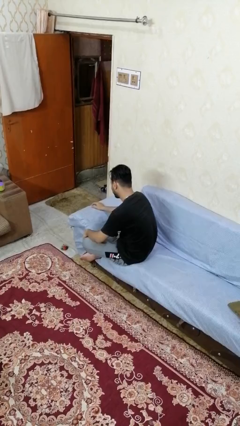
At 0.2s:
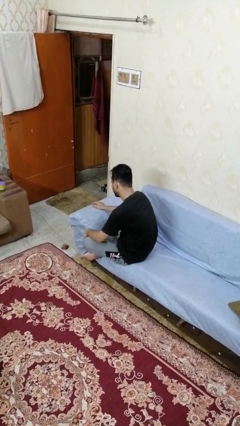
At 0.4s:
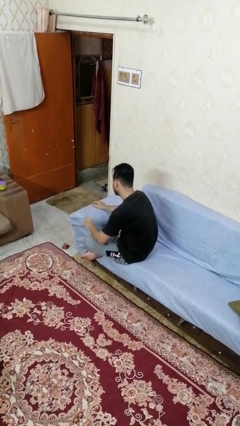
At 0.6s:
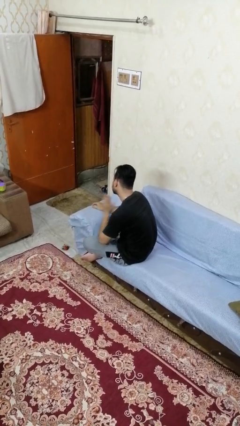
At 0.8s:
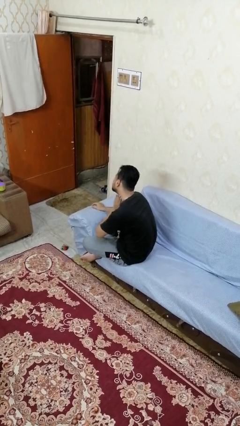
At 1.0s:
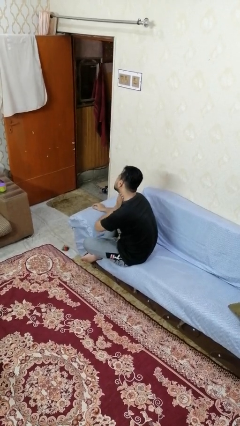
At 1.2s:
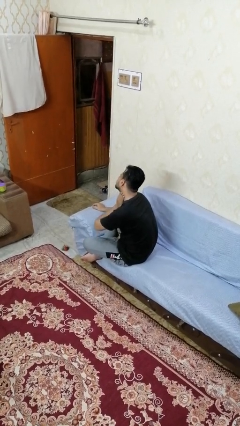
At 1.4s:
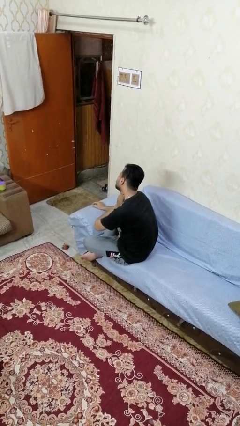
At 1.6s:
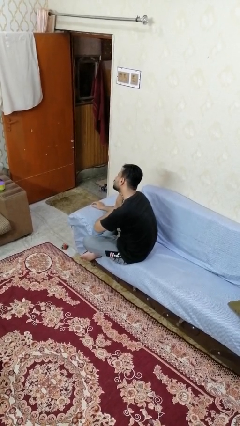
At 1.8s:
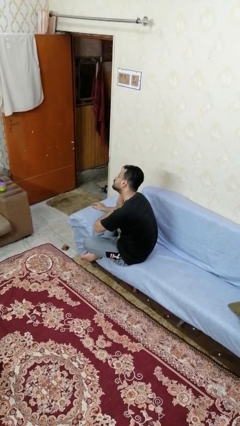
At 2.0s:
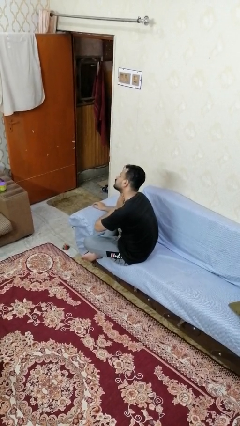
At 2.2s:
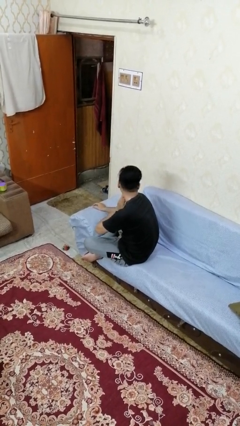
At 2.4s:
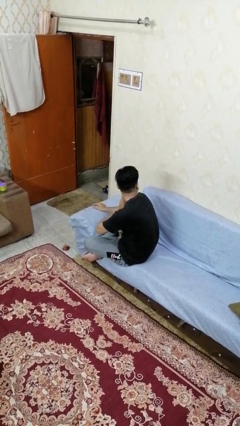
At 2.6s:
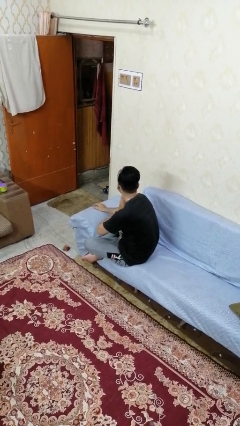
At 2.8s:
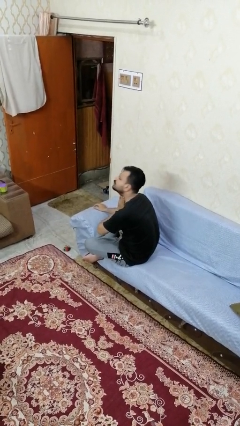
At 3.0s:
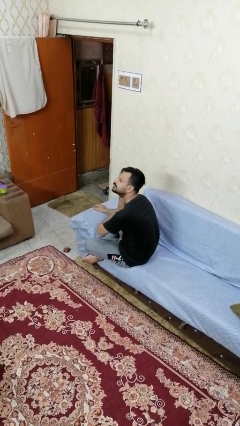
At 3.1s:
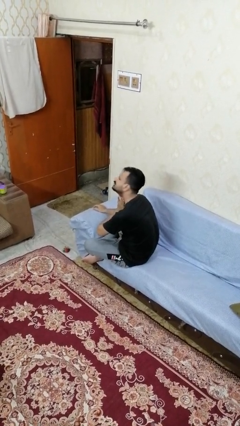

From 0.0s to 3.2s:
person rubs neck

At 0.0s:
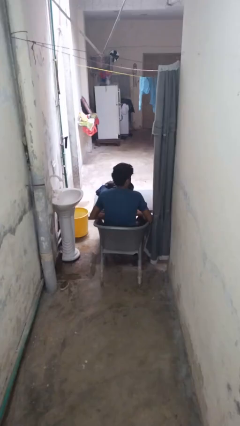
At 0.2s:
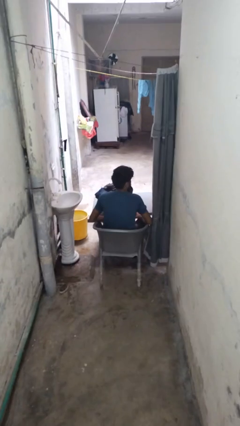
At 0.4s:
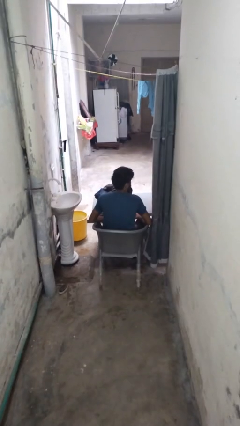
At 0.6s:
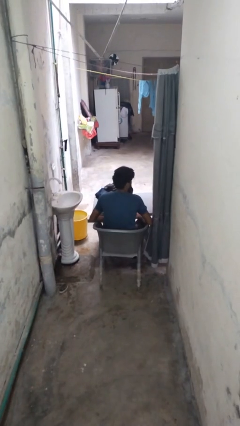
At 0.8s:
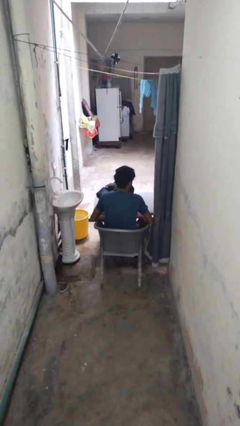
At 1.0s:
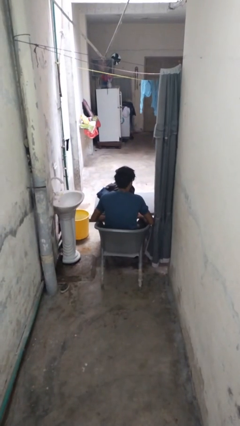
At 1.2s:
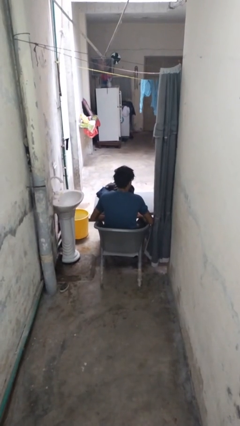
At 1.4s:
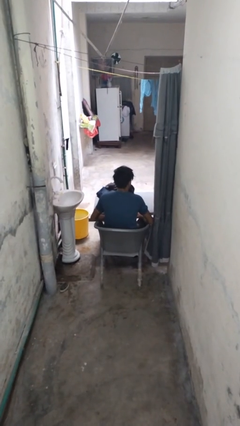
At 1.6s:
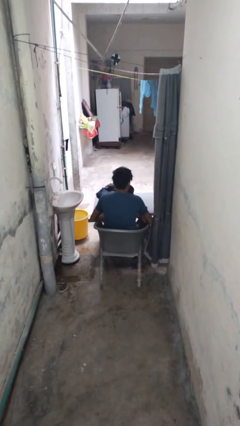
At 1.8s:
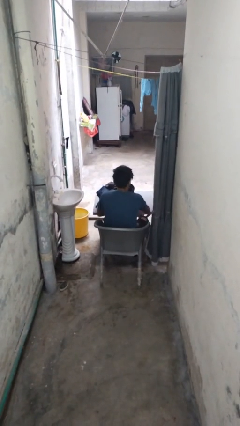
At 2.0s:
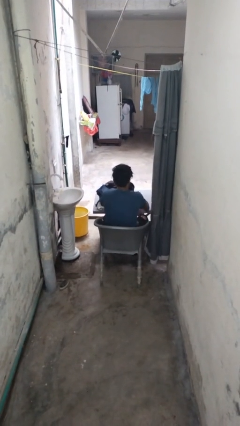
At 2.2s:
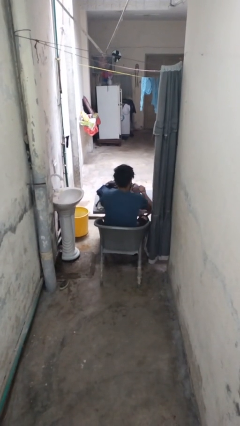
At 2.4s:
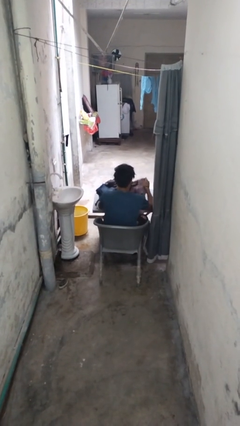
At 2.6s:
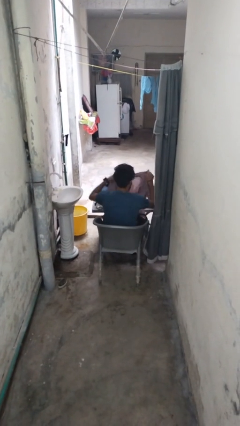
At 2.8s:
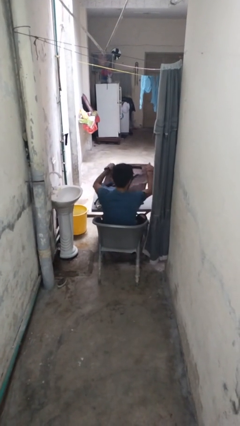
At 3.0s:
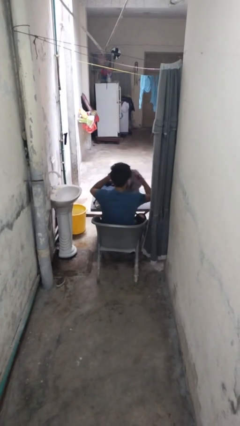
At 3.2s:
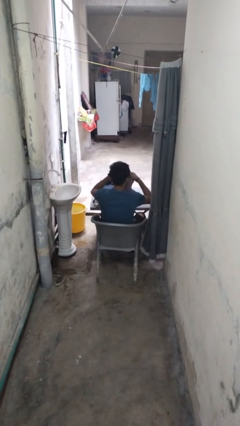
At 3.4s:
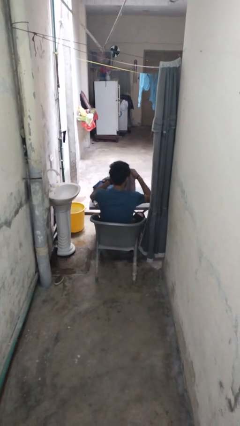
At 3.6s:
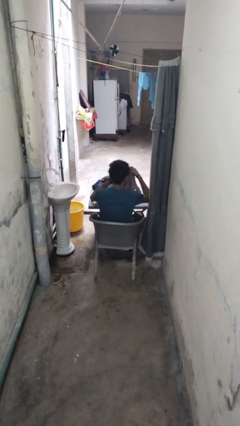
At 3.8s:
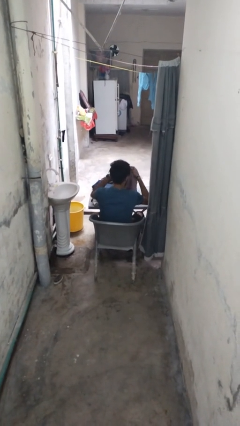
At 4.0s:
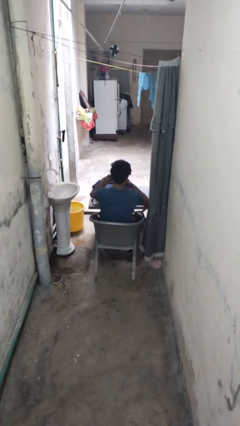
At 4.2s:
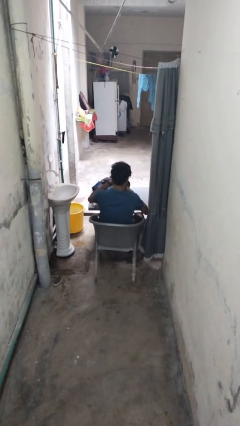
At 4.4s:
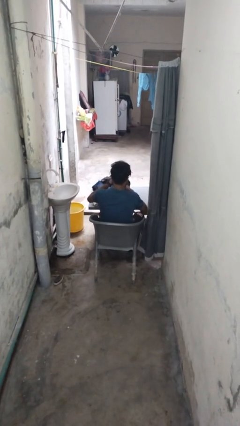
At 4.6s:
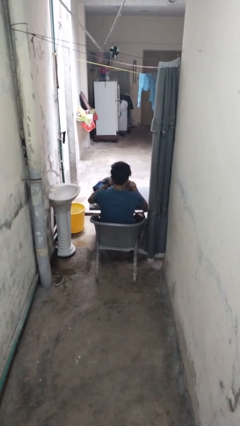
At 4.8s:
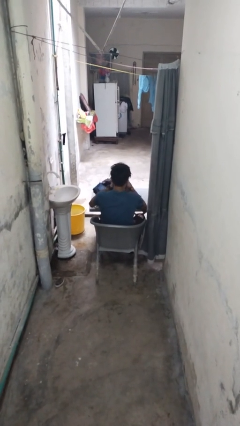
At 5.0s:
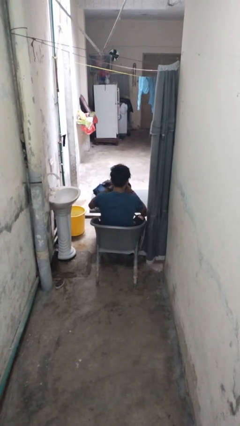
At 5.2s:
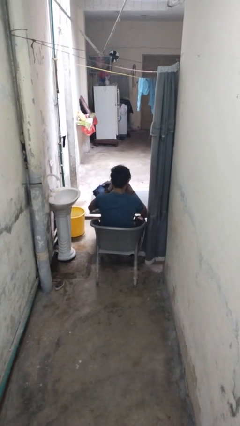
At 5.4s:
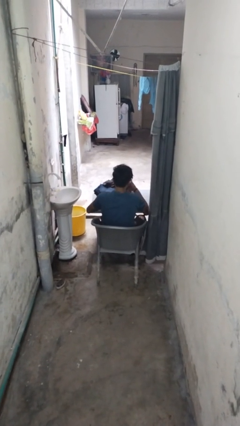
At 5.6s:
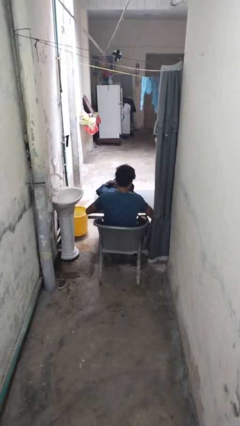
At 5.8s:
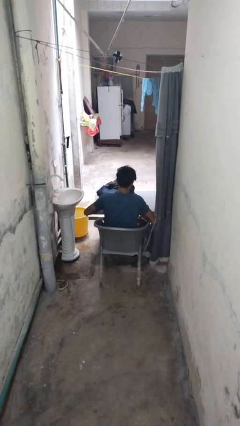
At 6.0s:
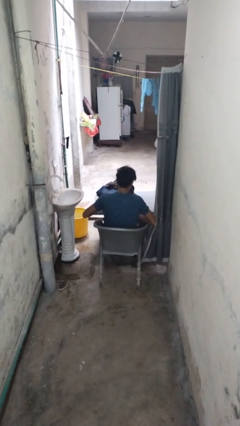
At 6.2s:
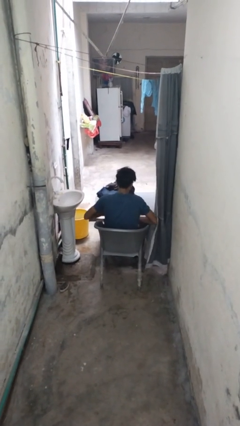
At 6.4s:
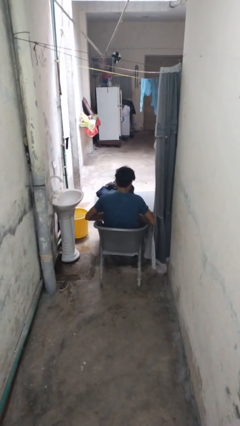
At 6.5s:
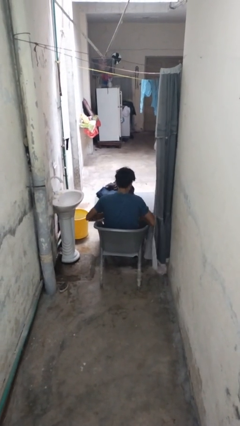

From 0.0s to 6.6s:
person folds shirt

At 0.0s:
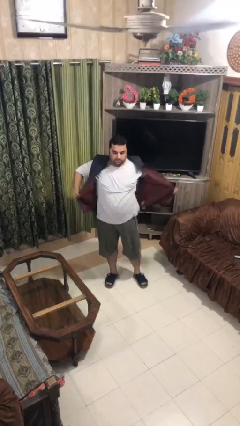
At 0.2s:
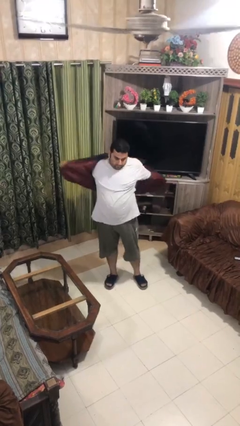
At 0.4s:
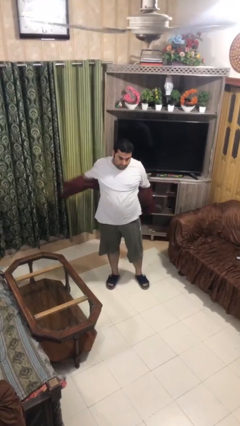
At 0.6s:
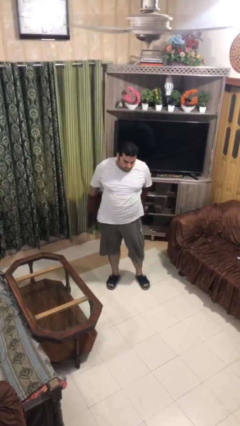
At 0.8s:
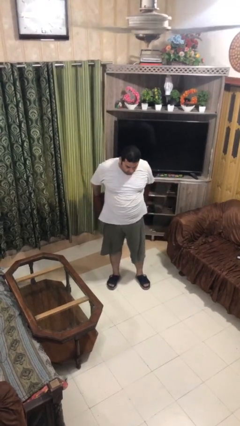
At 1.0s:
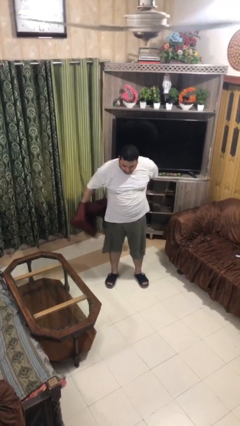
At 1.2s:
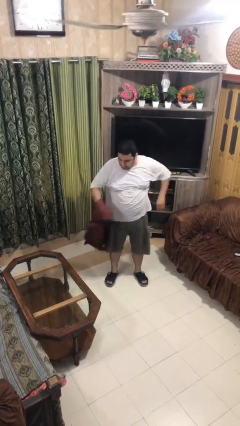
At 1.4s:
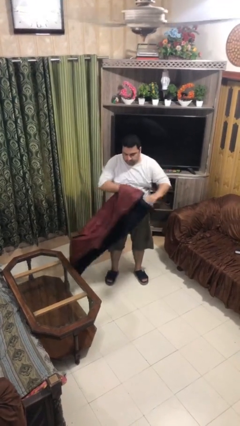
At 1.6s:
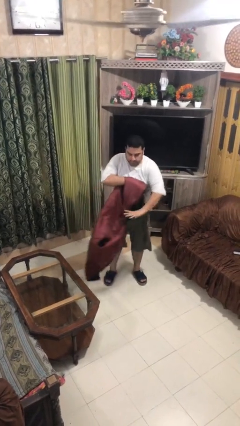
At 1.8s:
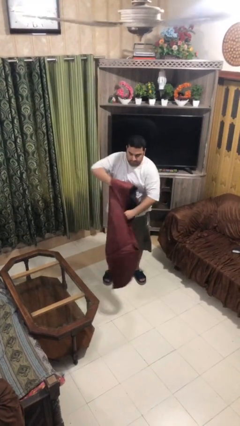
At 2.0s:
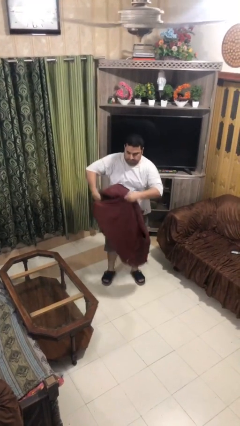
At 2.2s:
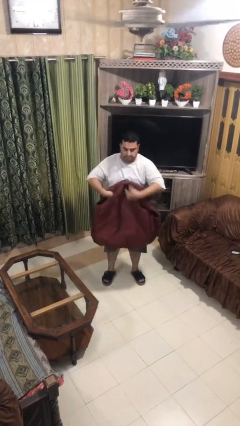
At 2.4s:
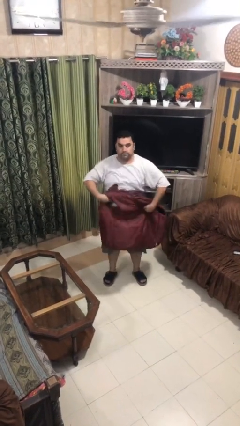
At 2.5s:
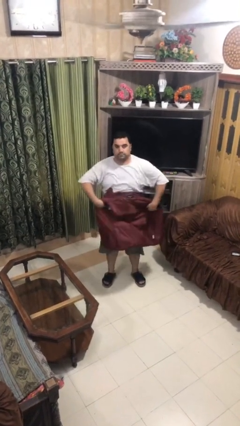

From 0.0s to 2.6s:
person takes off jacket

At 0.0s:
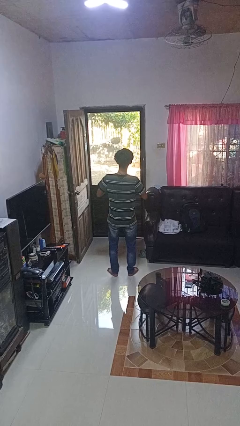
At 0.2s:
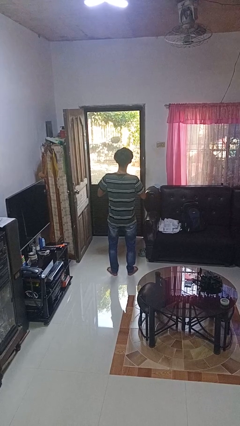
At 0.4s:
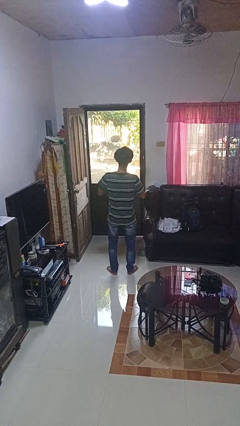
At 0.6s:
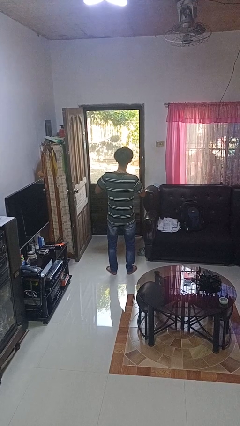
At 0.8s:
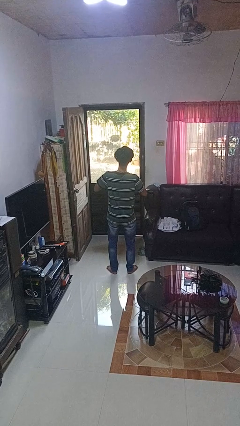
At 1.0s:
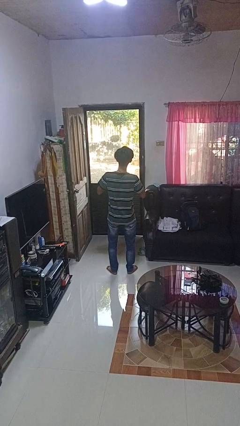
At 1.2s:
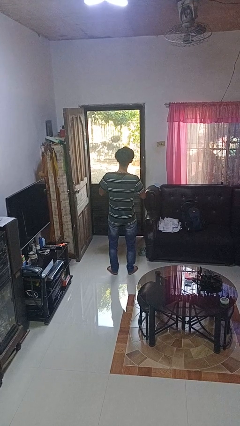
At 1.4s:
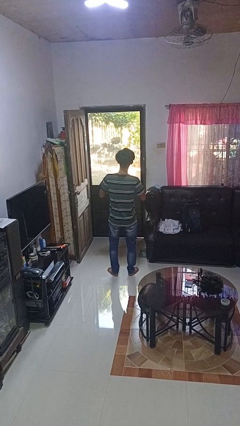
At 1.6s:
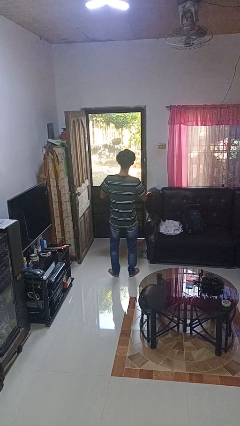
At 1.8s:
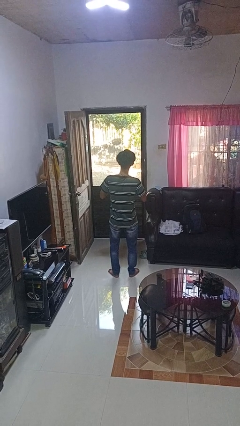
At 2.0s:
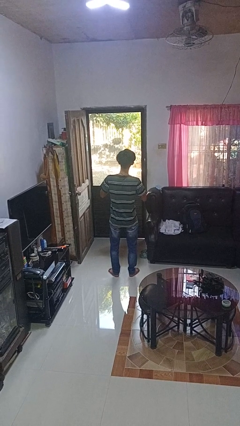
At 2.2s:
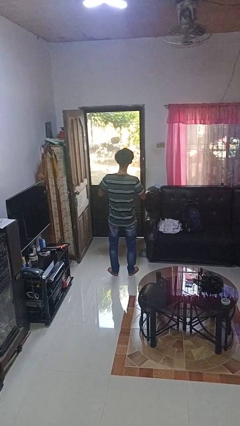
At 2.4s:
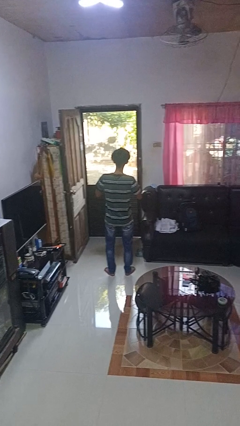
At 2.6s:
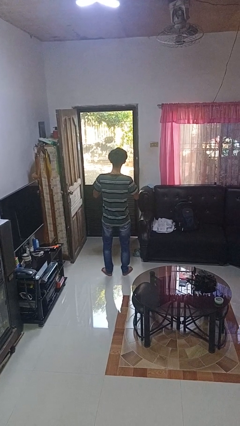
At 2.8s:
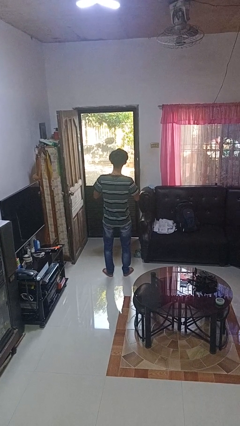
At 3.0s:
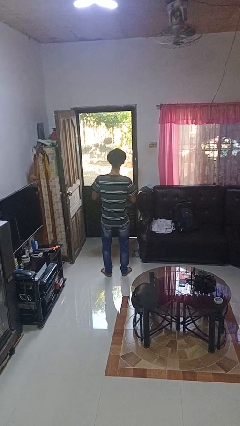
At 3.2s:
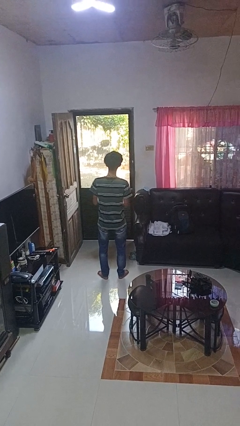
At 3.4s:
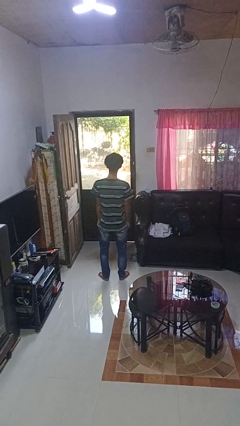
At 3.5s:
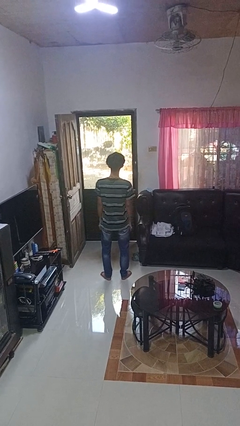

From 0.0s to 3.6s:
person unbuttons shirt

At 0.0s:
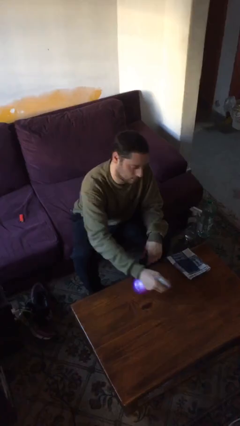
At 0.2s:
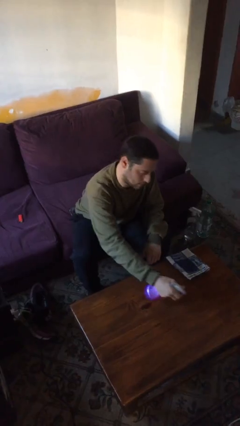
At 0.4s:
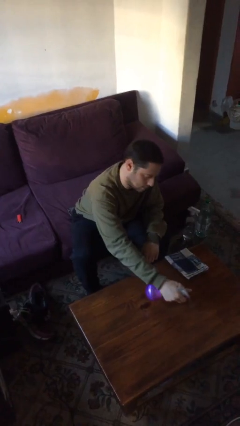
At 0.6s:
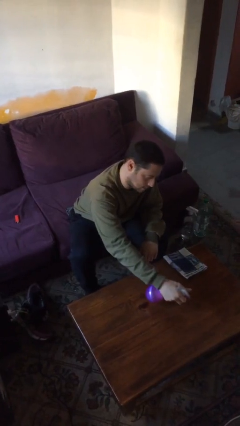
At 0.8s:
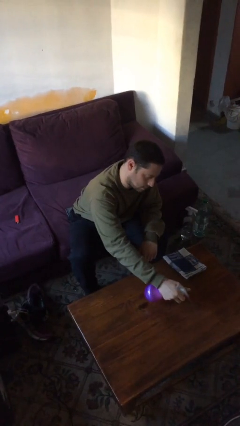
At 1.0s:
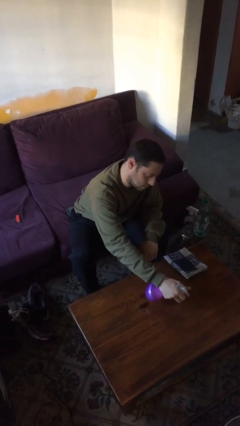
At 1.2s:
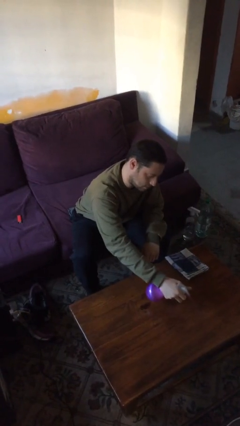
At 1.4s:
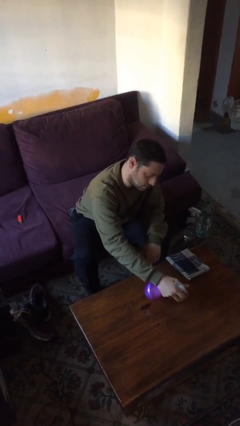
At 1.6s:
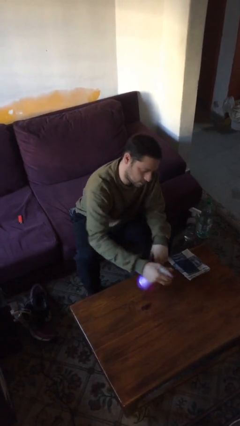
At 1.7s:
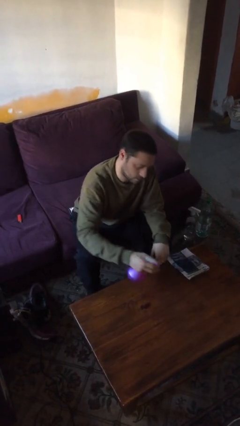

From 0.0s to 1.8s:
person sprays from bottle
